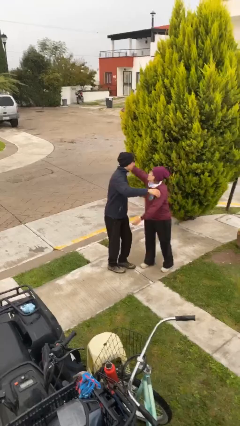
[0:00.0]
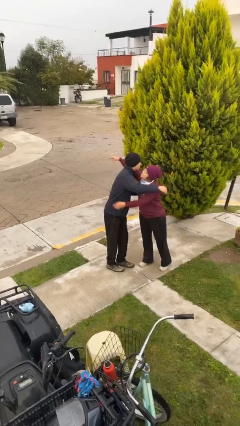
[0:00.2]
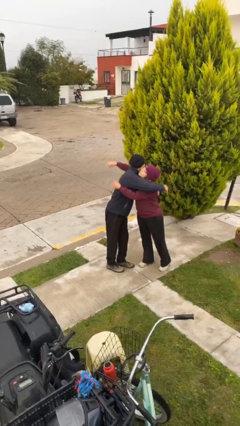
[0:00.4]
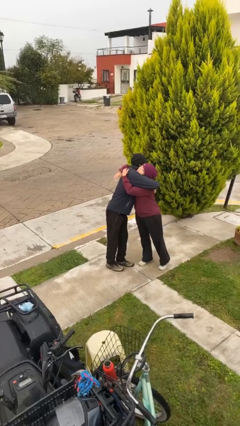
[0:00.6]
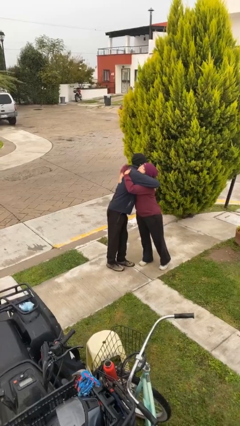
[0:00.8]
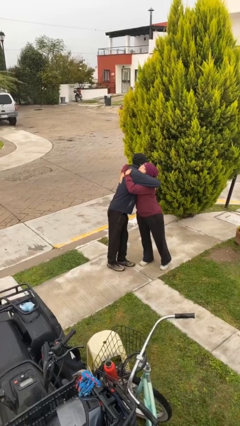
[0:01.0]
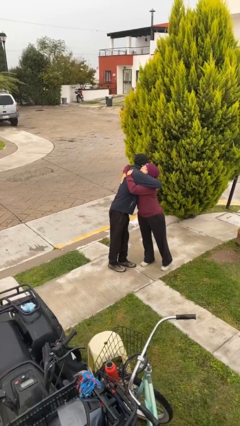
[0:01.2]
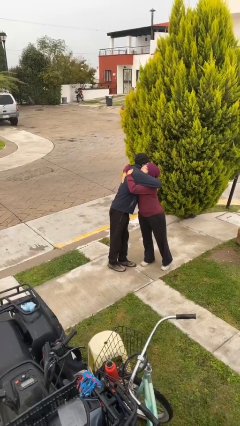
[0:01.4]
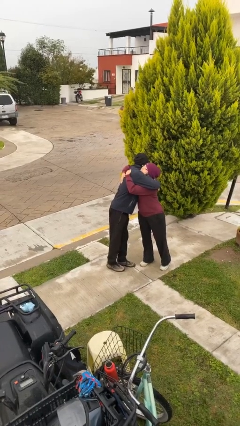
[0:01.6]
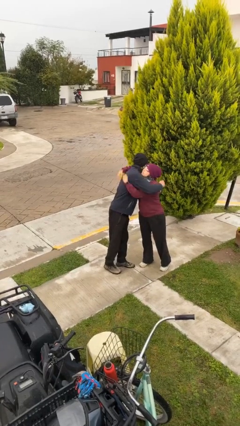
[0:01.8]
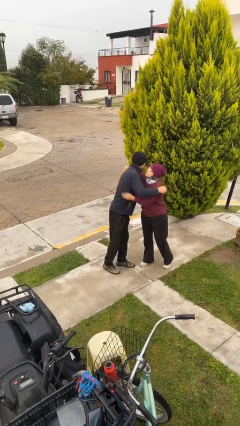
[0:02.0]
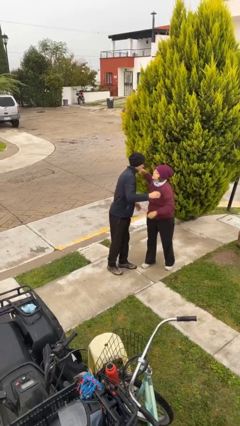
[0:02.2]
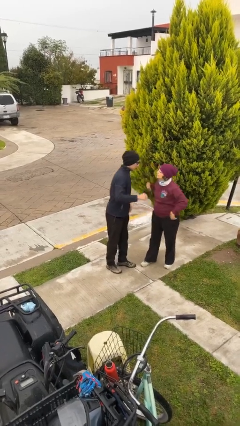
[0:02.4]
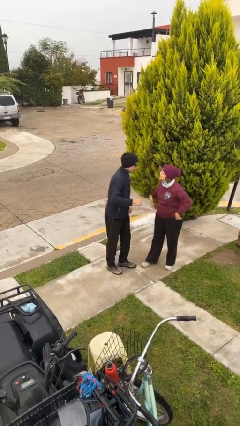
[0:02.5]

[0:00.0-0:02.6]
person embraces person

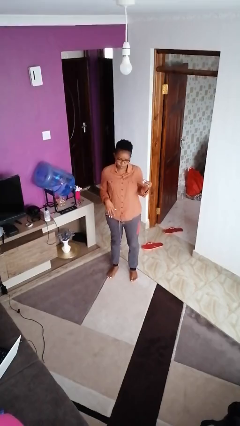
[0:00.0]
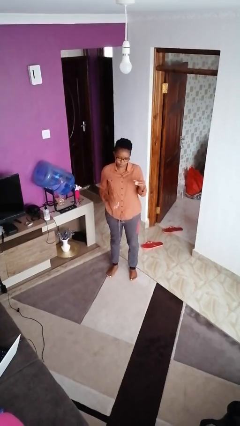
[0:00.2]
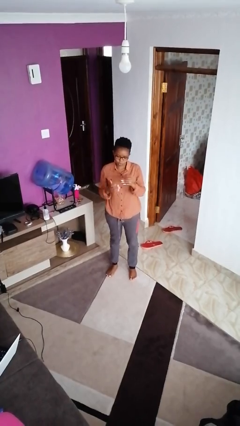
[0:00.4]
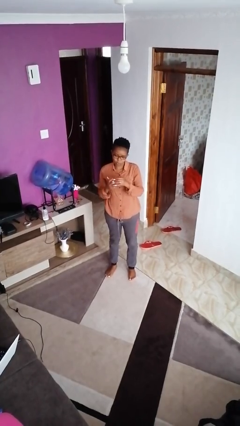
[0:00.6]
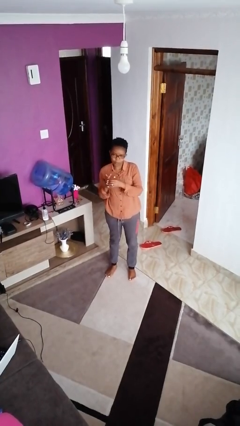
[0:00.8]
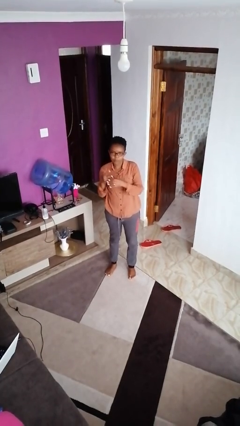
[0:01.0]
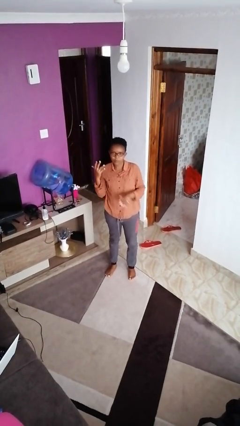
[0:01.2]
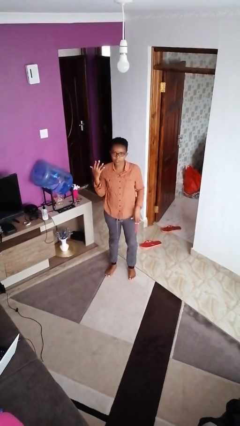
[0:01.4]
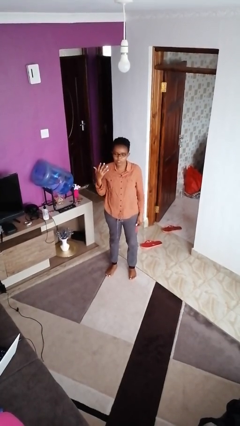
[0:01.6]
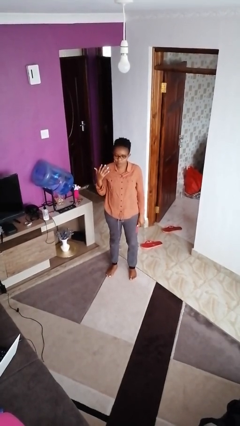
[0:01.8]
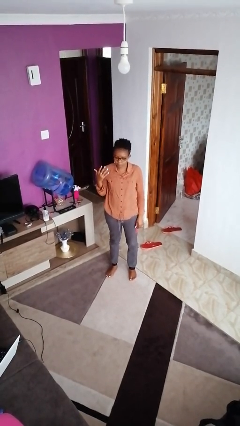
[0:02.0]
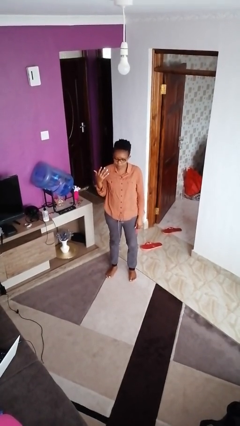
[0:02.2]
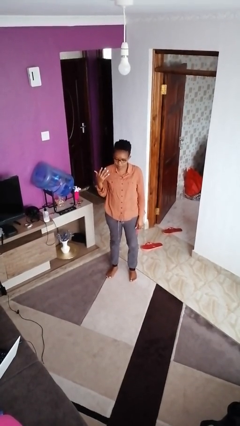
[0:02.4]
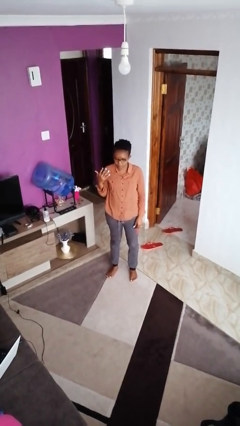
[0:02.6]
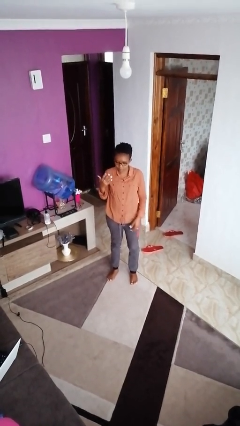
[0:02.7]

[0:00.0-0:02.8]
person puts on ring

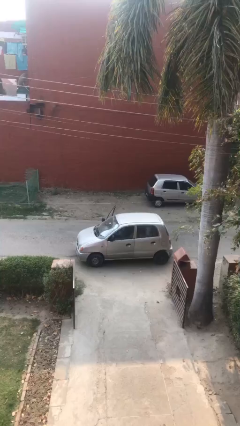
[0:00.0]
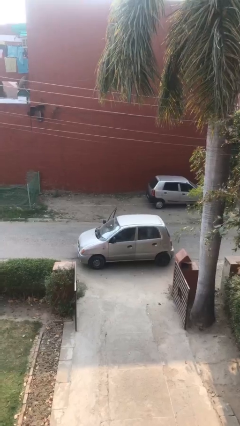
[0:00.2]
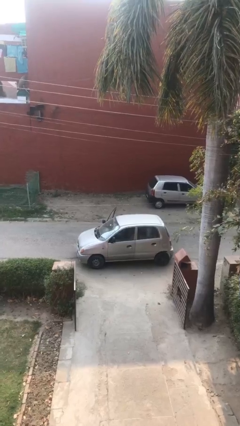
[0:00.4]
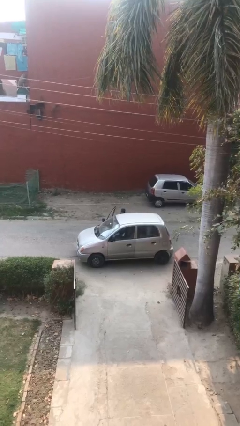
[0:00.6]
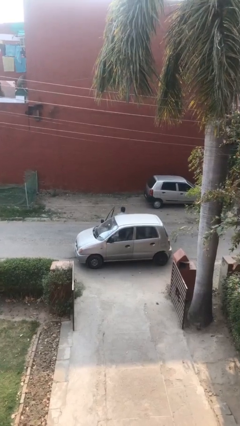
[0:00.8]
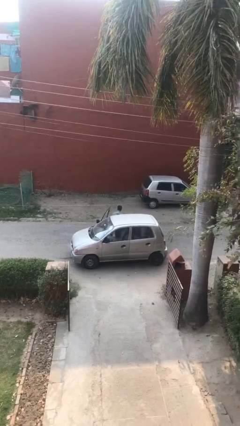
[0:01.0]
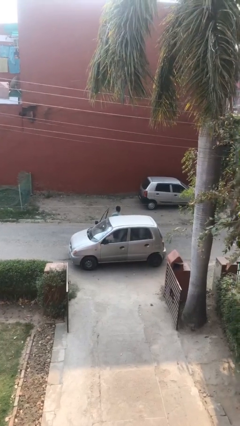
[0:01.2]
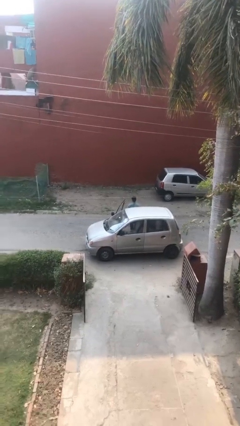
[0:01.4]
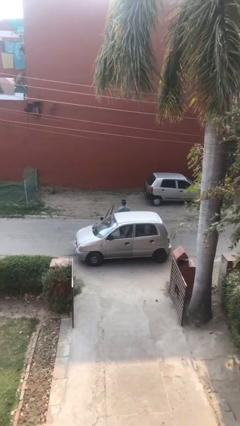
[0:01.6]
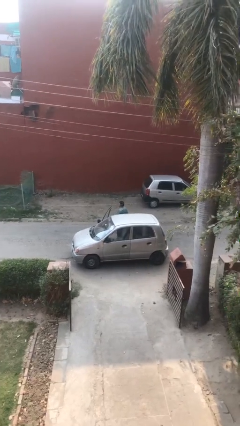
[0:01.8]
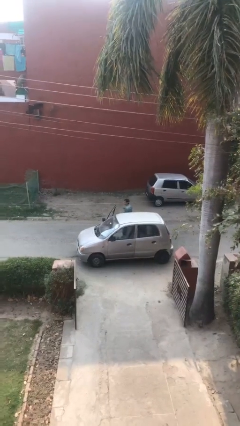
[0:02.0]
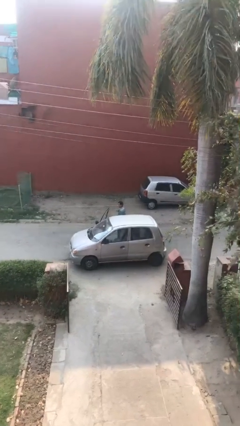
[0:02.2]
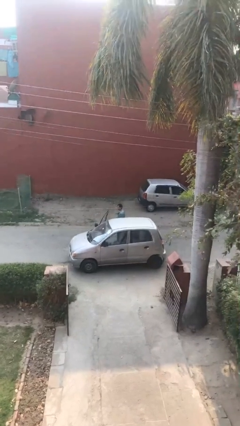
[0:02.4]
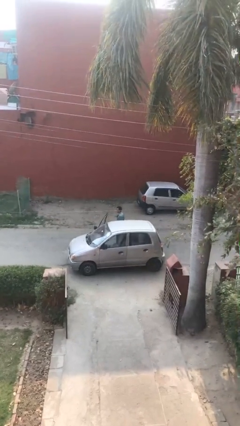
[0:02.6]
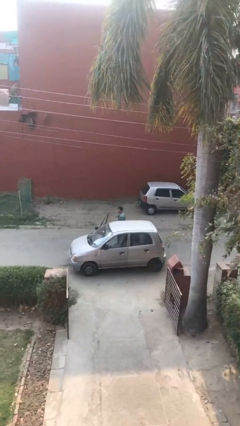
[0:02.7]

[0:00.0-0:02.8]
person exits car

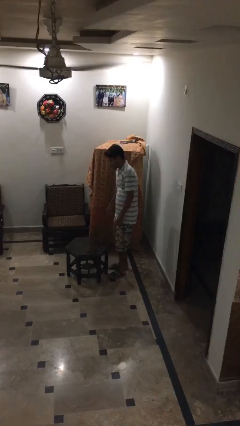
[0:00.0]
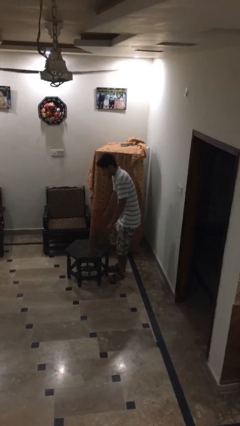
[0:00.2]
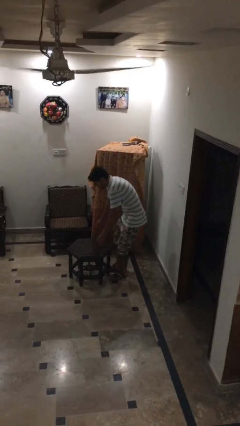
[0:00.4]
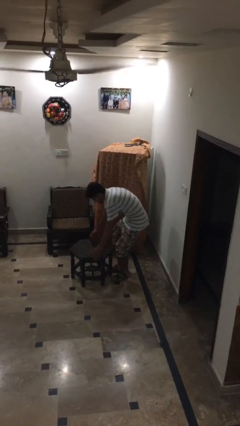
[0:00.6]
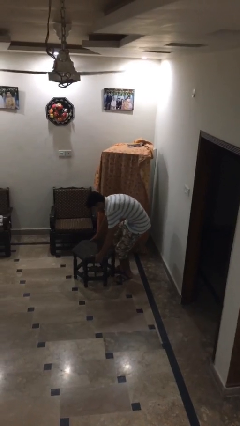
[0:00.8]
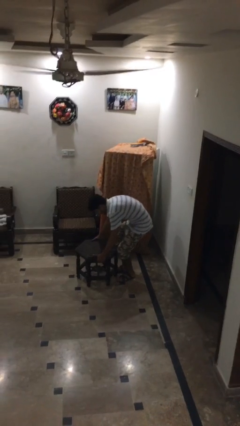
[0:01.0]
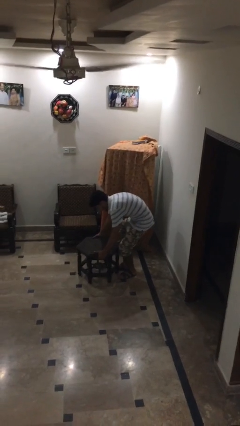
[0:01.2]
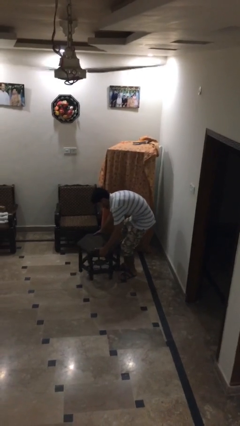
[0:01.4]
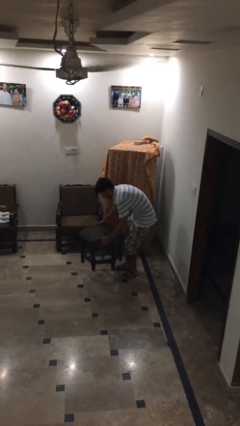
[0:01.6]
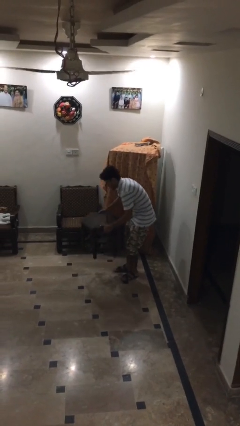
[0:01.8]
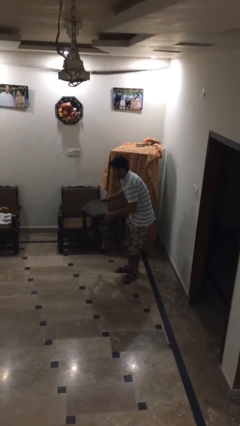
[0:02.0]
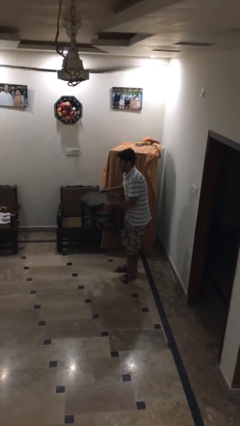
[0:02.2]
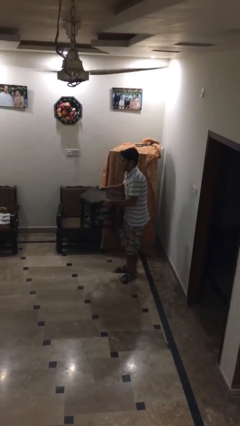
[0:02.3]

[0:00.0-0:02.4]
person picks up object from floor

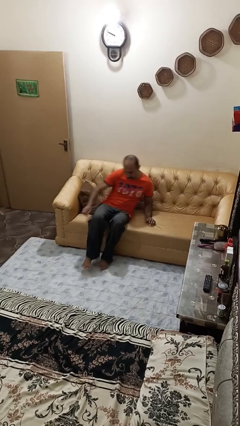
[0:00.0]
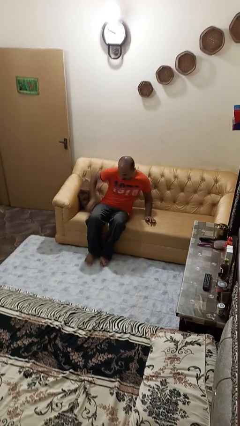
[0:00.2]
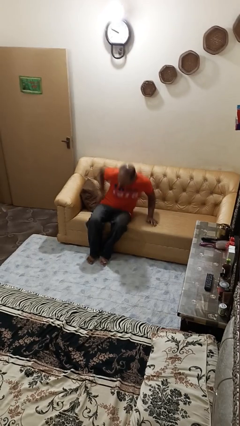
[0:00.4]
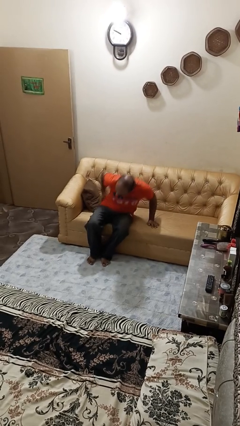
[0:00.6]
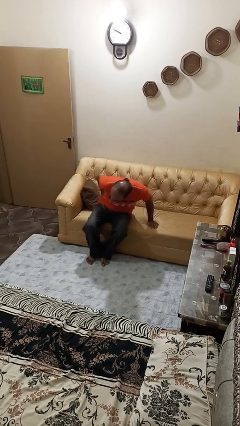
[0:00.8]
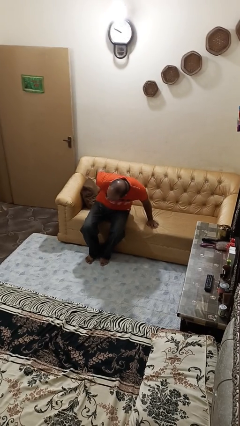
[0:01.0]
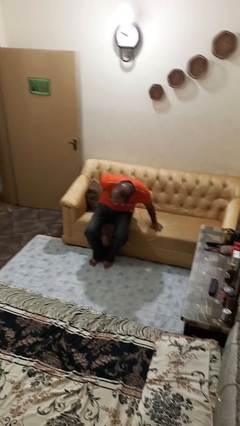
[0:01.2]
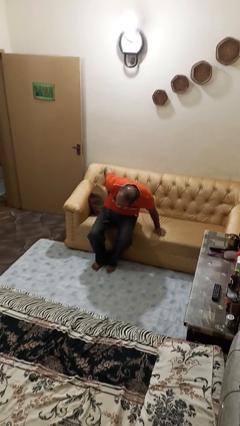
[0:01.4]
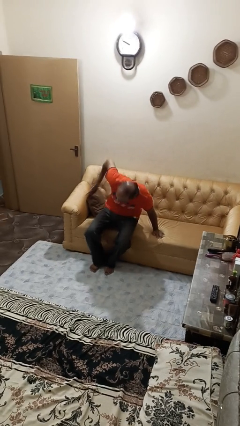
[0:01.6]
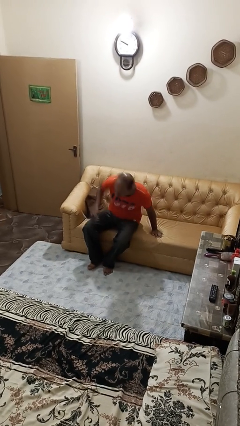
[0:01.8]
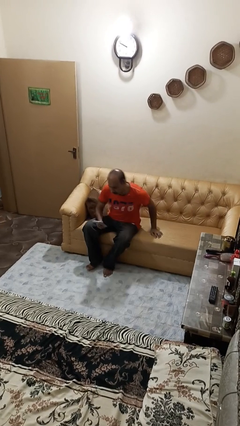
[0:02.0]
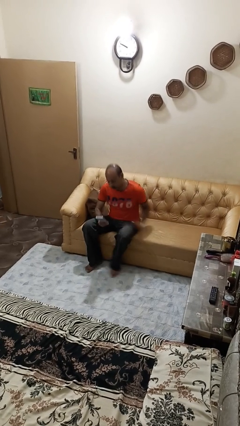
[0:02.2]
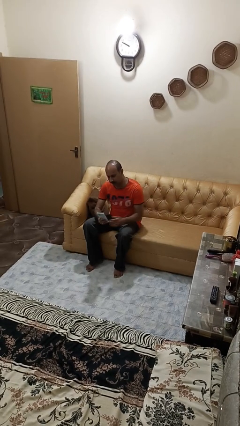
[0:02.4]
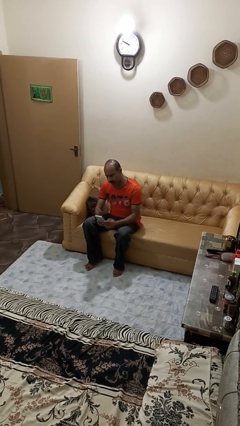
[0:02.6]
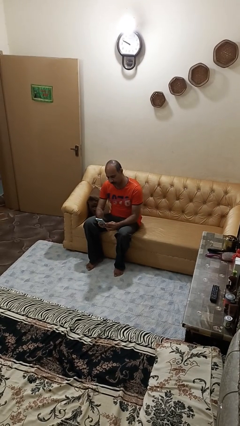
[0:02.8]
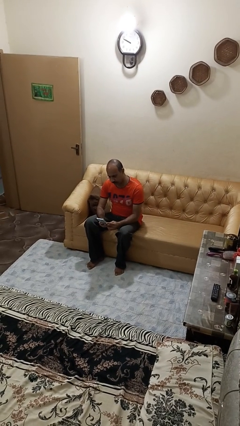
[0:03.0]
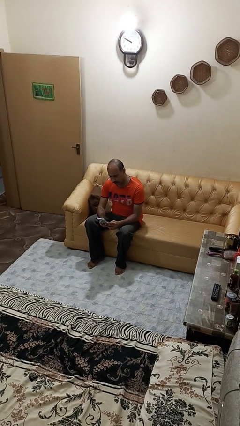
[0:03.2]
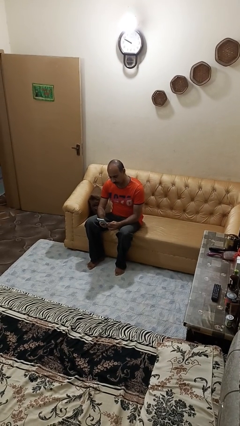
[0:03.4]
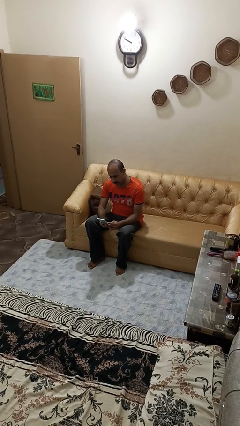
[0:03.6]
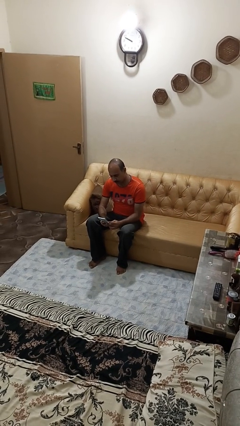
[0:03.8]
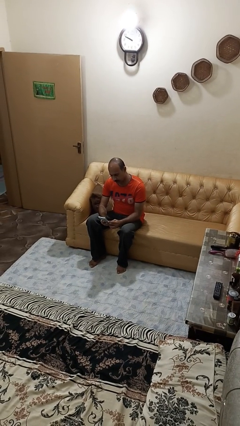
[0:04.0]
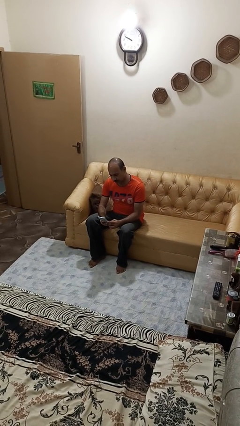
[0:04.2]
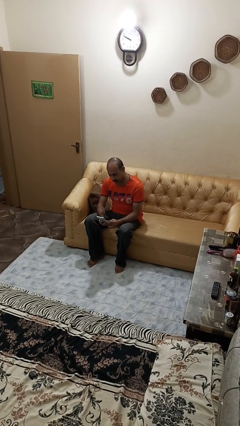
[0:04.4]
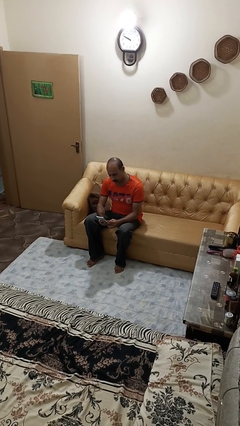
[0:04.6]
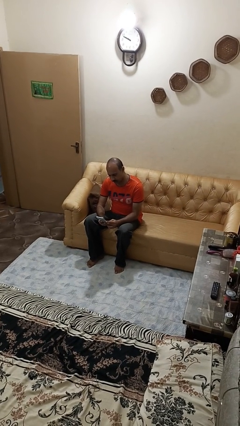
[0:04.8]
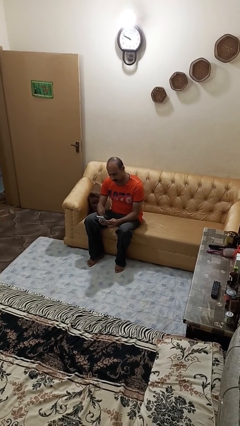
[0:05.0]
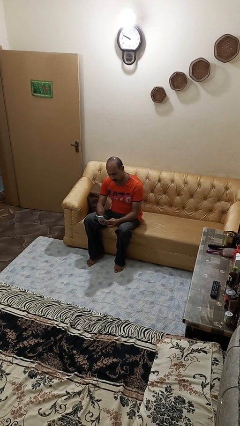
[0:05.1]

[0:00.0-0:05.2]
person takes phone from pocket

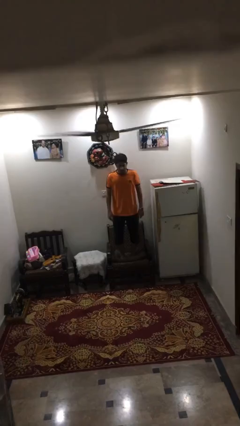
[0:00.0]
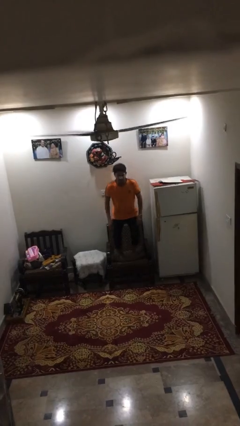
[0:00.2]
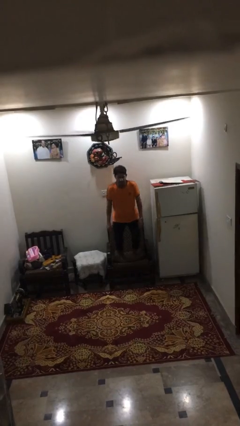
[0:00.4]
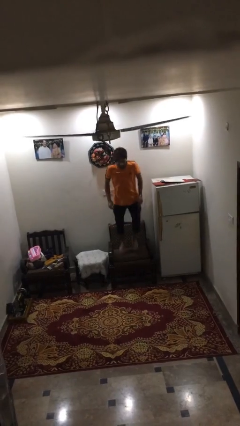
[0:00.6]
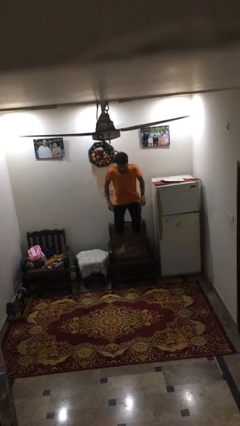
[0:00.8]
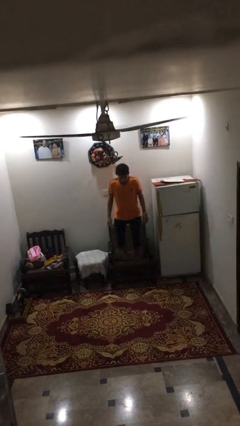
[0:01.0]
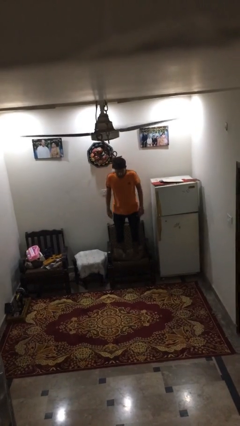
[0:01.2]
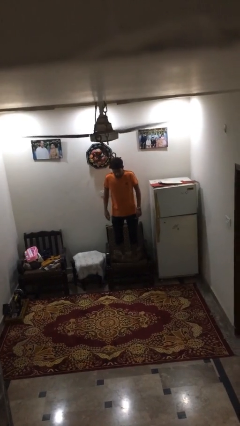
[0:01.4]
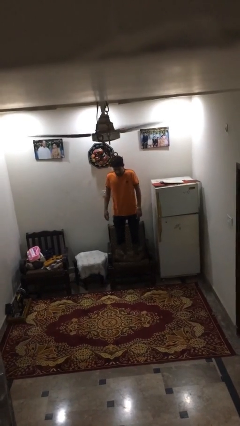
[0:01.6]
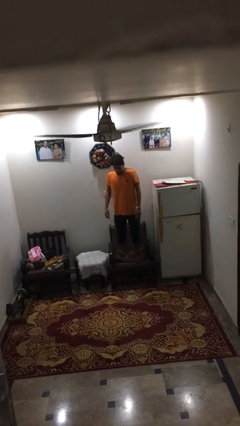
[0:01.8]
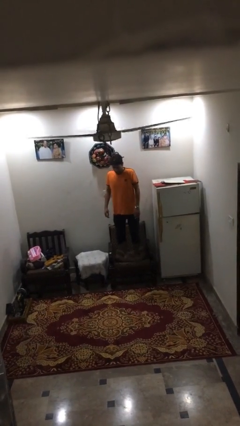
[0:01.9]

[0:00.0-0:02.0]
person jumps on couch
